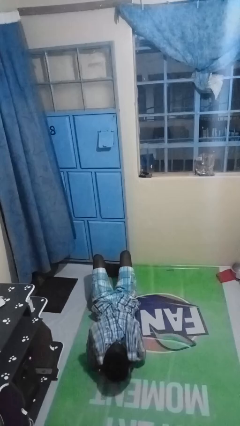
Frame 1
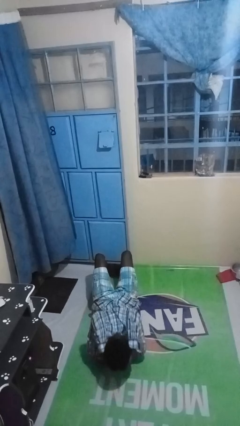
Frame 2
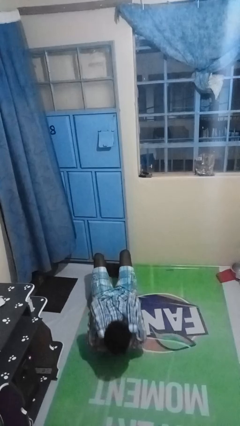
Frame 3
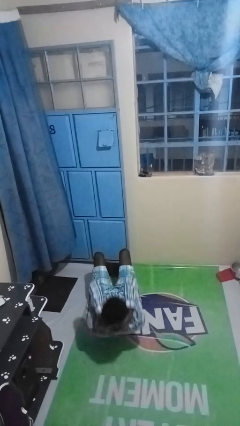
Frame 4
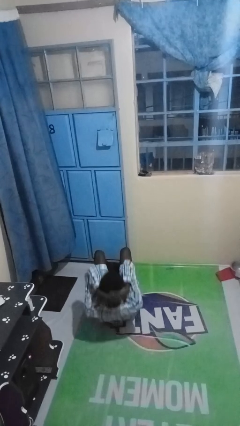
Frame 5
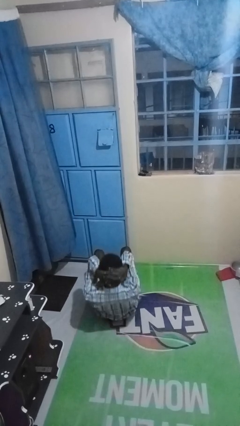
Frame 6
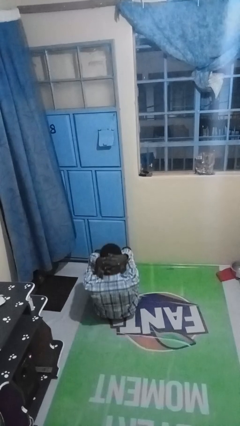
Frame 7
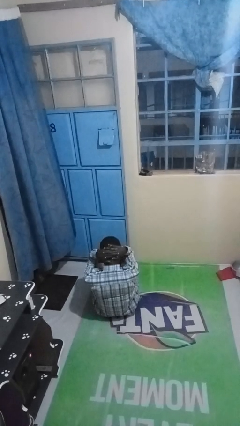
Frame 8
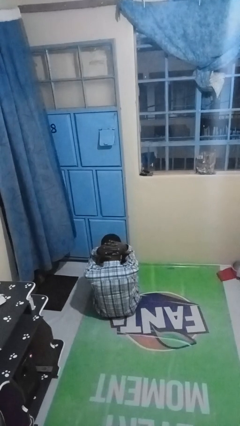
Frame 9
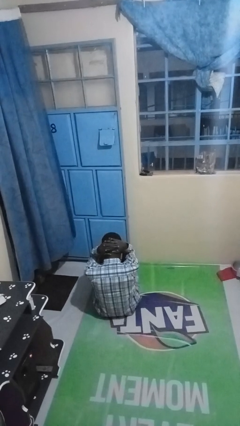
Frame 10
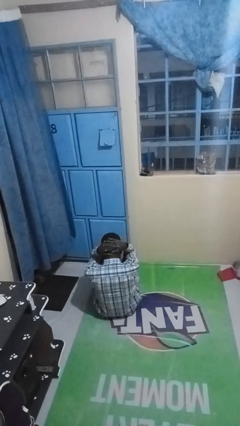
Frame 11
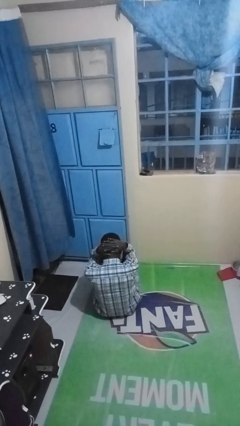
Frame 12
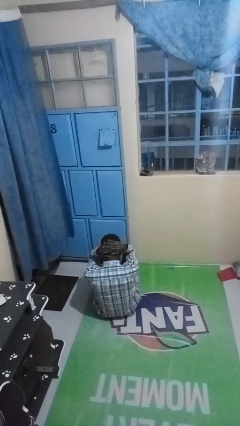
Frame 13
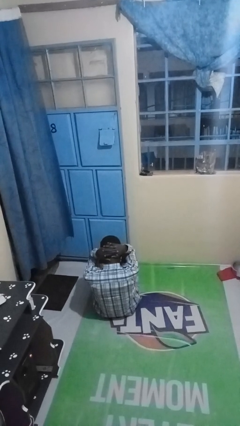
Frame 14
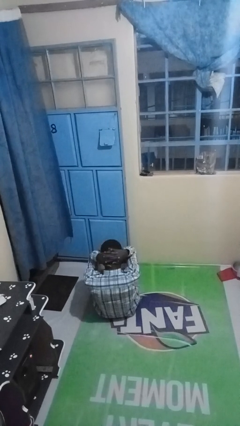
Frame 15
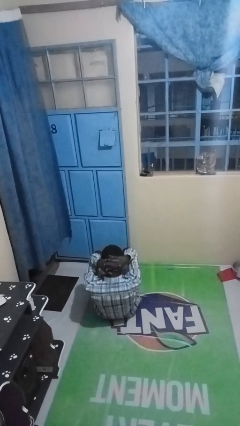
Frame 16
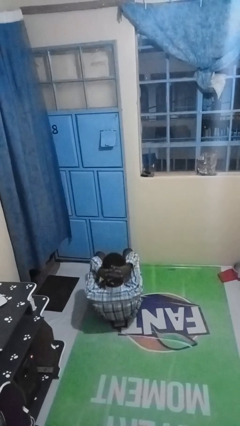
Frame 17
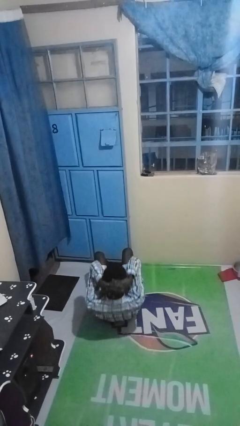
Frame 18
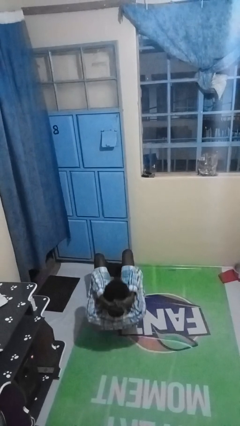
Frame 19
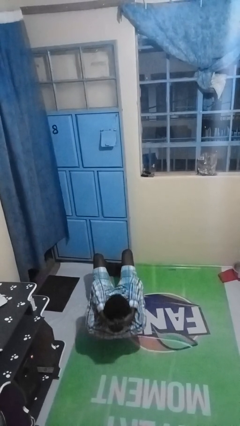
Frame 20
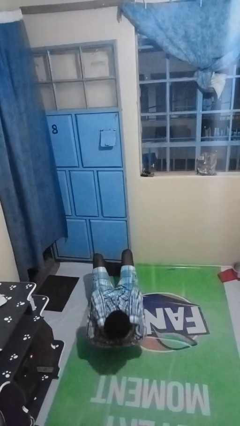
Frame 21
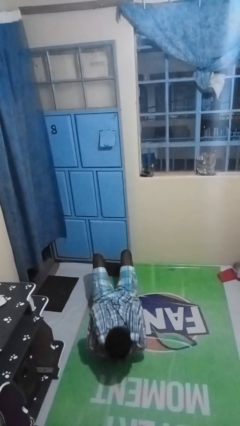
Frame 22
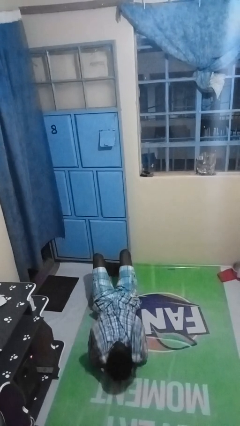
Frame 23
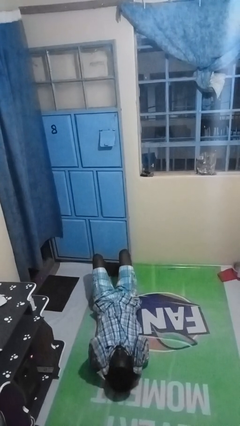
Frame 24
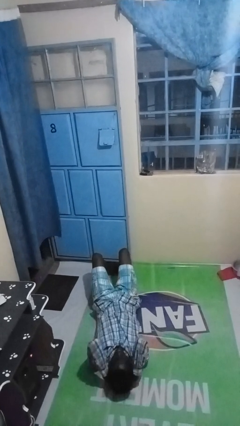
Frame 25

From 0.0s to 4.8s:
person exercises with situp

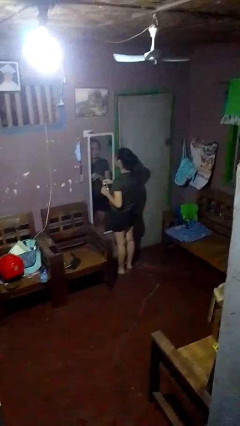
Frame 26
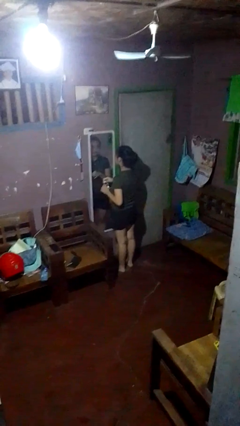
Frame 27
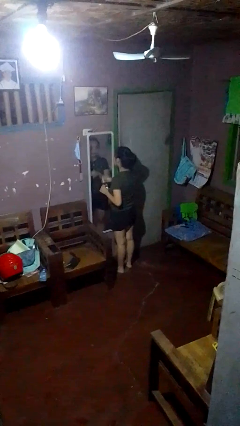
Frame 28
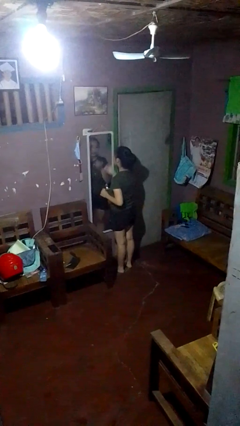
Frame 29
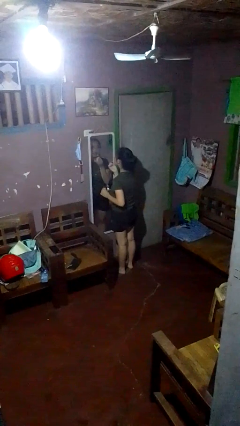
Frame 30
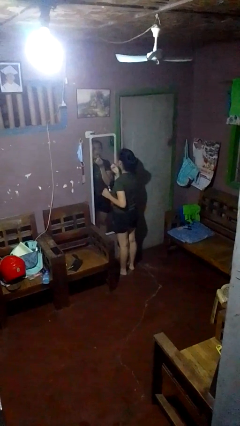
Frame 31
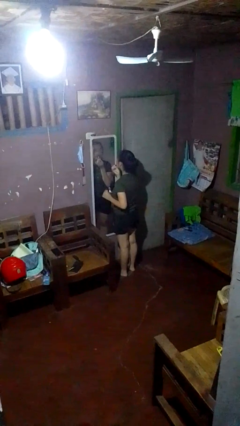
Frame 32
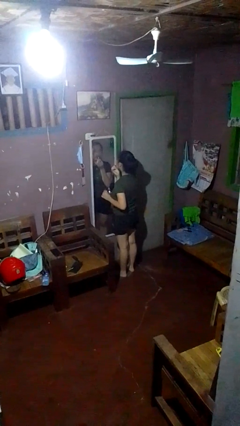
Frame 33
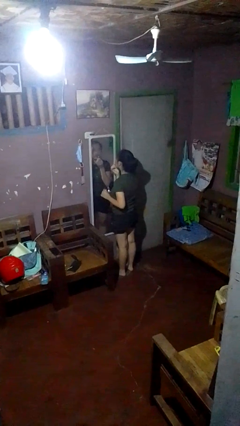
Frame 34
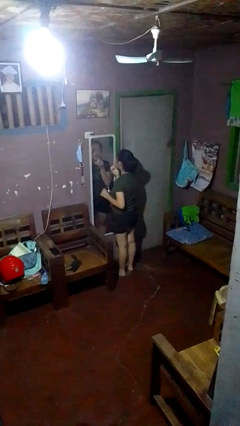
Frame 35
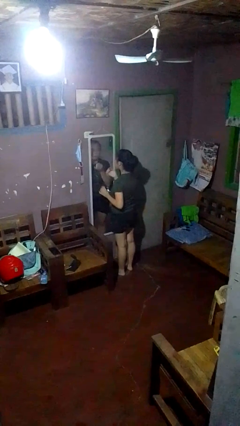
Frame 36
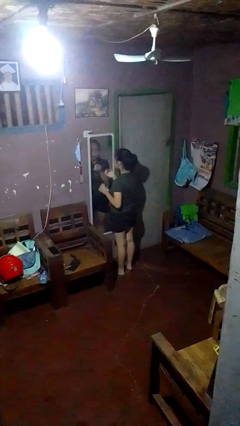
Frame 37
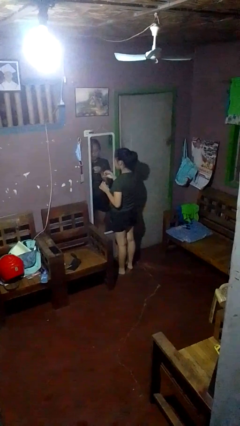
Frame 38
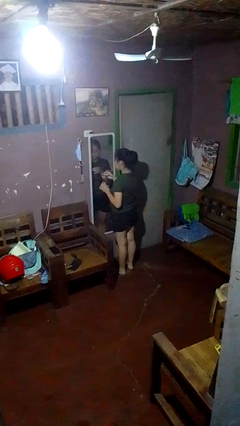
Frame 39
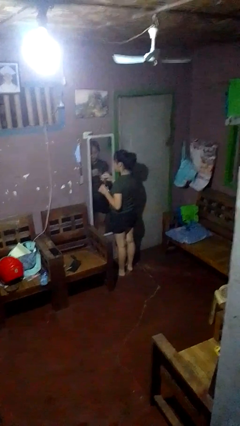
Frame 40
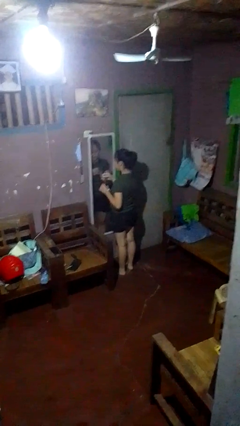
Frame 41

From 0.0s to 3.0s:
person applies lip makeup

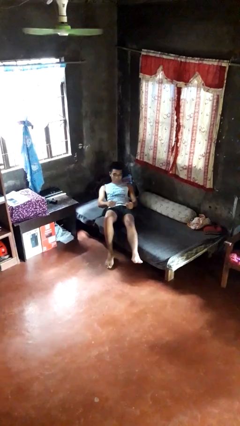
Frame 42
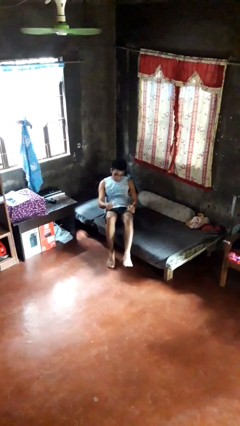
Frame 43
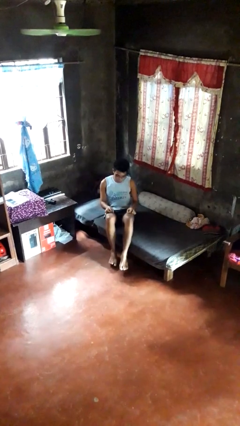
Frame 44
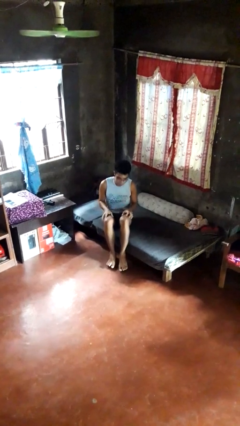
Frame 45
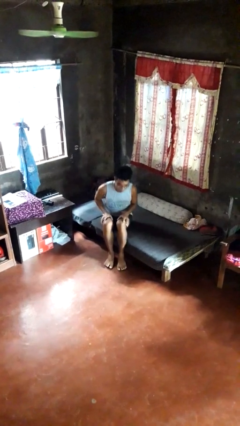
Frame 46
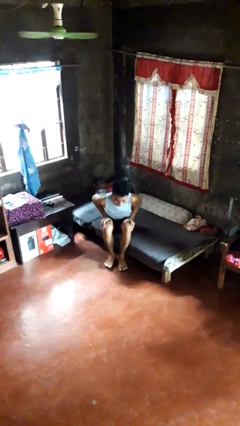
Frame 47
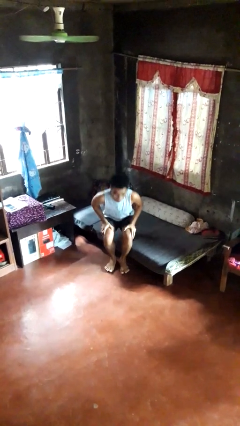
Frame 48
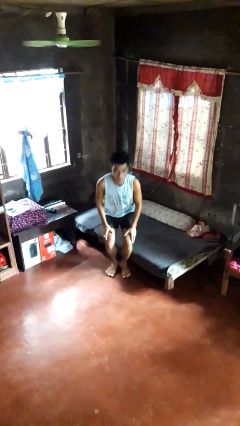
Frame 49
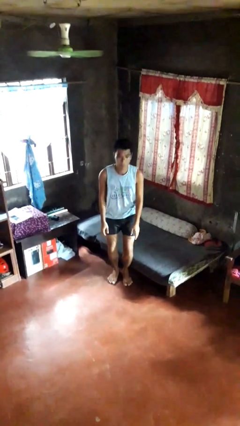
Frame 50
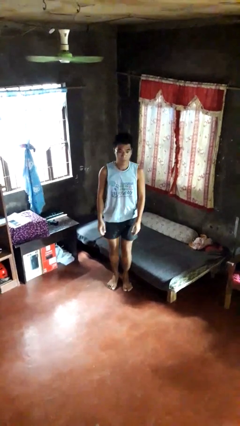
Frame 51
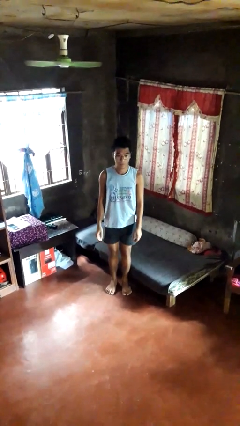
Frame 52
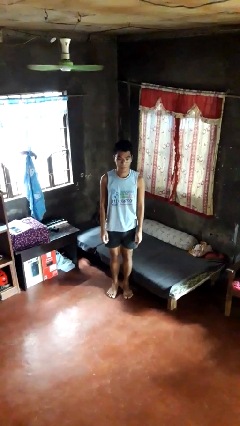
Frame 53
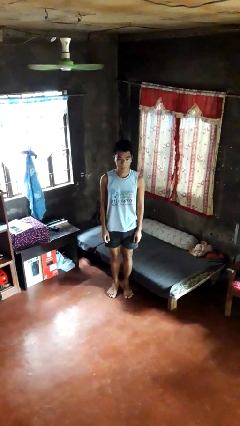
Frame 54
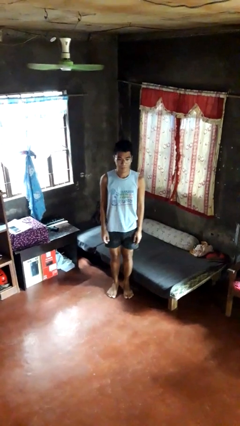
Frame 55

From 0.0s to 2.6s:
person stands up

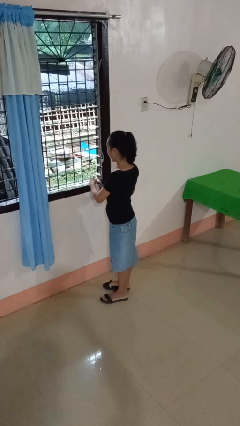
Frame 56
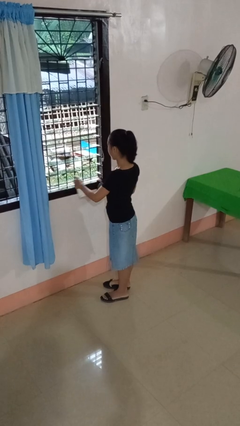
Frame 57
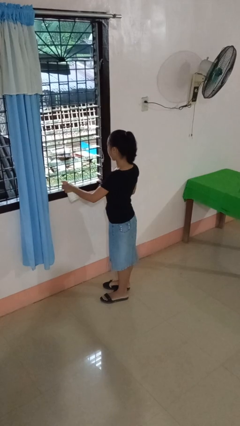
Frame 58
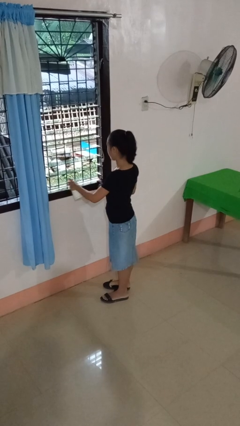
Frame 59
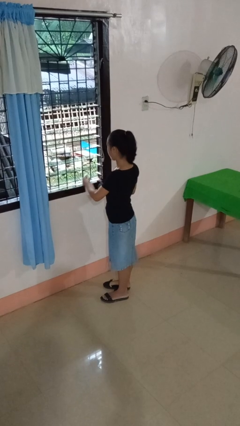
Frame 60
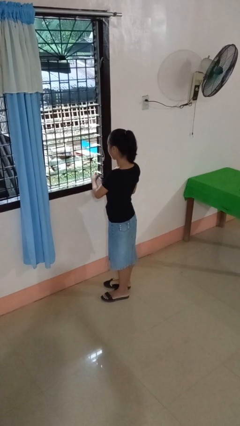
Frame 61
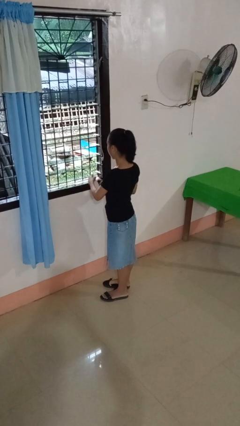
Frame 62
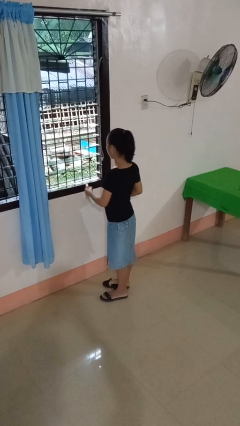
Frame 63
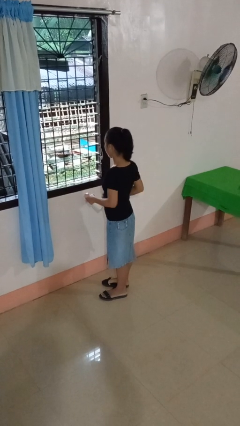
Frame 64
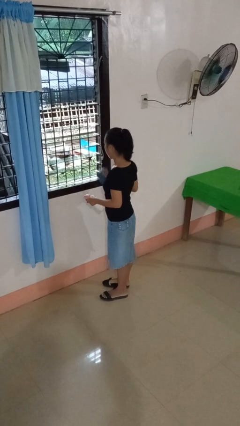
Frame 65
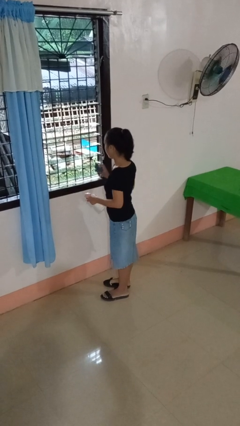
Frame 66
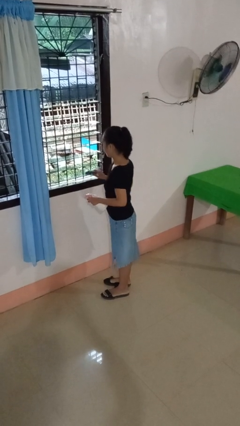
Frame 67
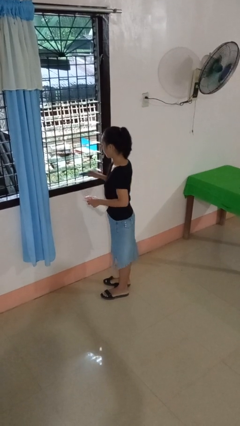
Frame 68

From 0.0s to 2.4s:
person sprays from bottle

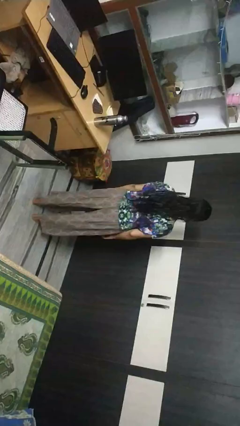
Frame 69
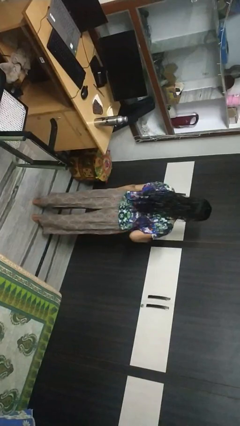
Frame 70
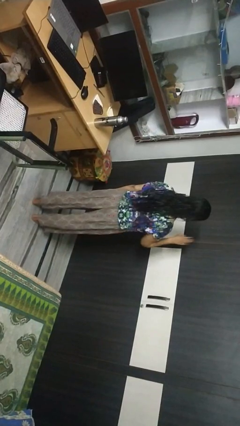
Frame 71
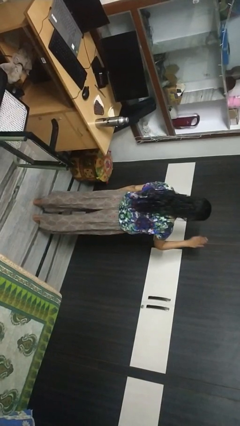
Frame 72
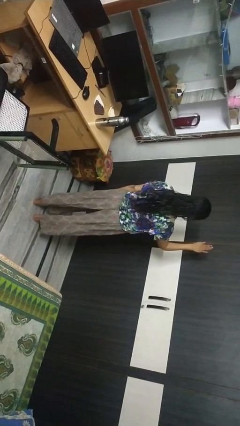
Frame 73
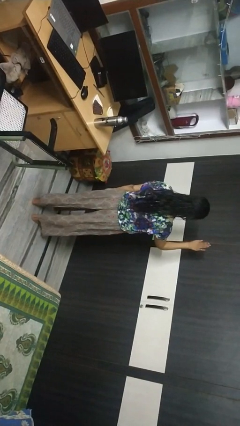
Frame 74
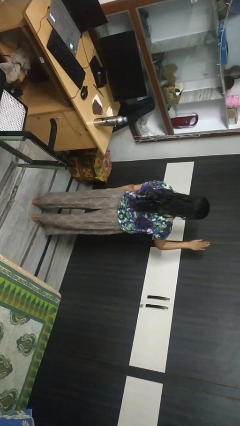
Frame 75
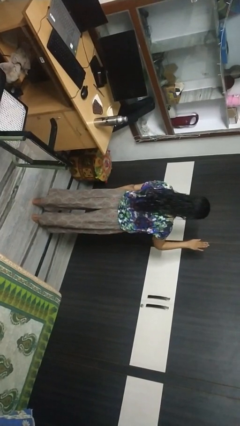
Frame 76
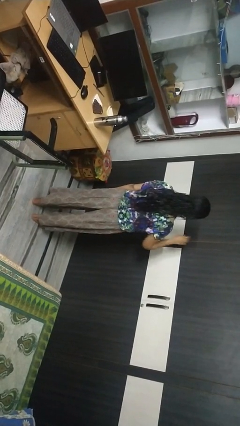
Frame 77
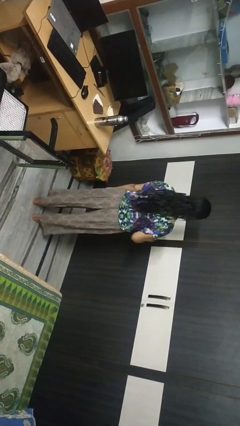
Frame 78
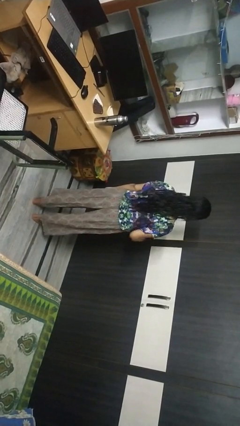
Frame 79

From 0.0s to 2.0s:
person gestures stop

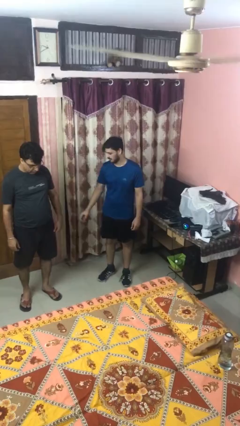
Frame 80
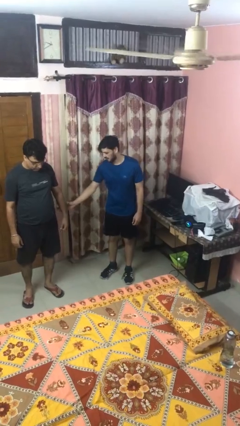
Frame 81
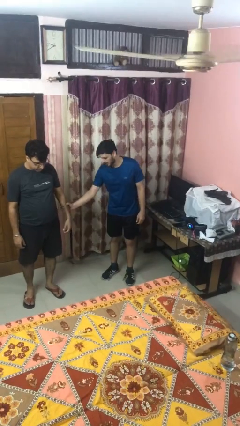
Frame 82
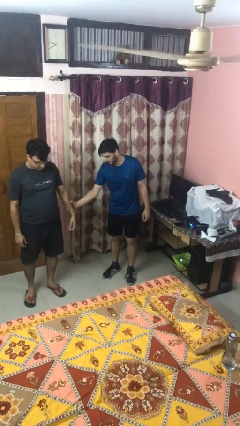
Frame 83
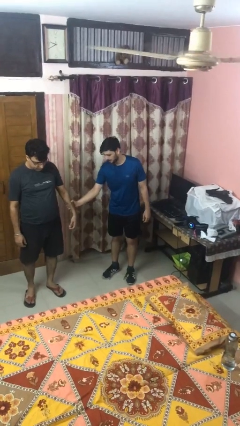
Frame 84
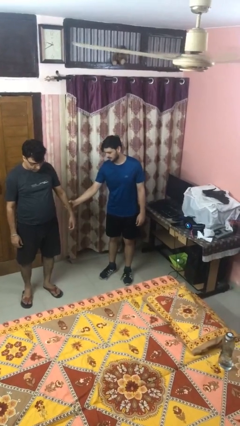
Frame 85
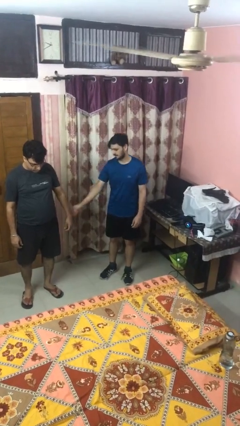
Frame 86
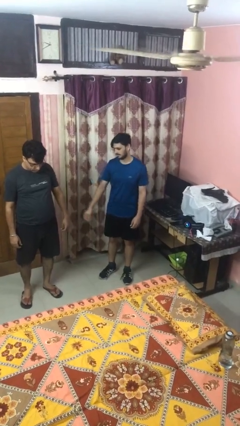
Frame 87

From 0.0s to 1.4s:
person grabs person by forearm

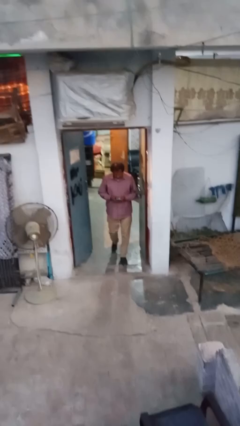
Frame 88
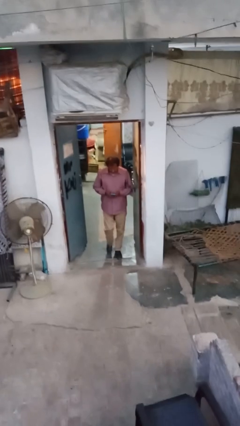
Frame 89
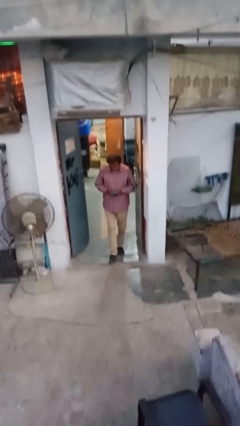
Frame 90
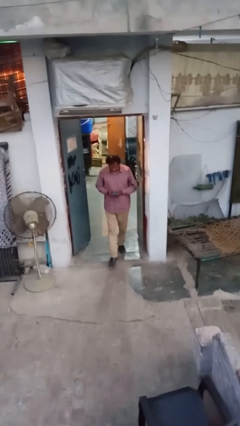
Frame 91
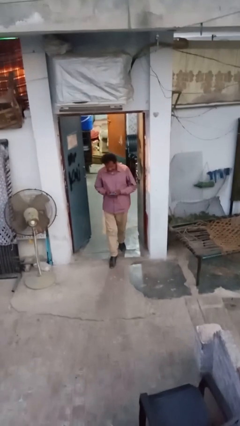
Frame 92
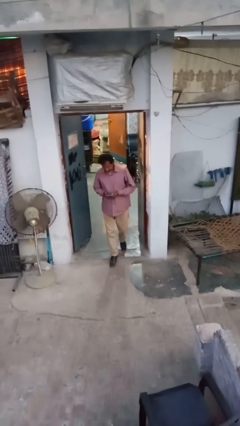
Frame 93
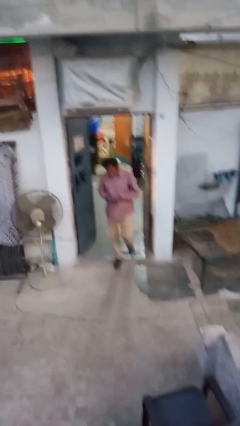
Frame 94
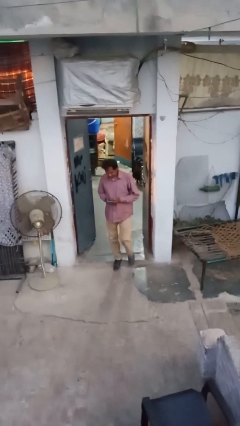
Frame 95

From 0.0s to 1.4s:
person enters scene through structure
